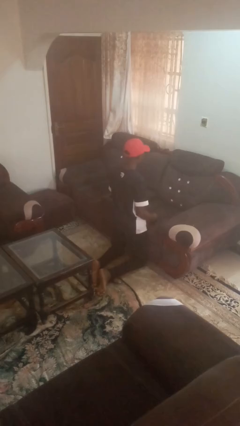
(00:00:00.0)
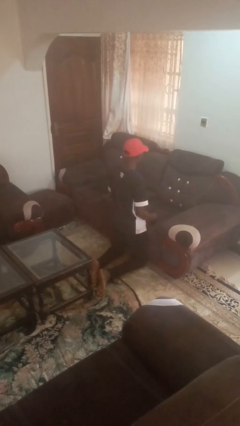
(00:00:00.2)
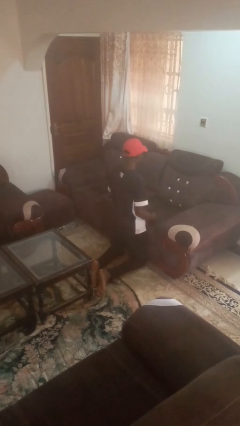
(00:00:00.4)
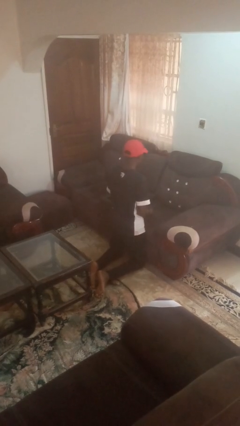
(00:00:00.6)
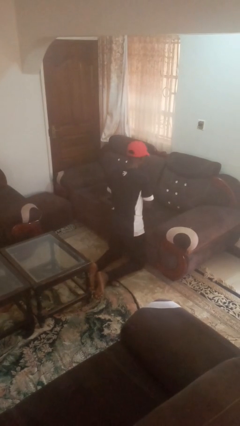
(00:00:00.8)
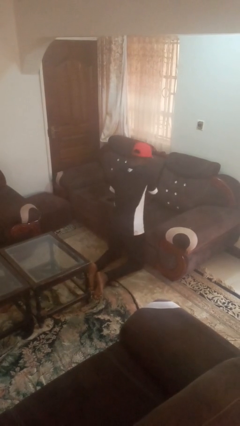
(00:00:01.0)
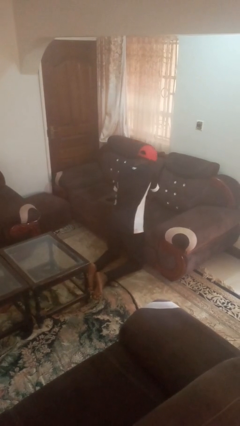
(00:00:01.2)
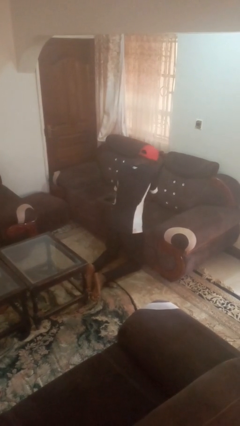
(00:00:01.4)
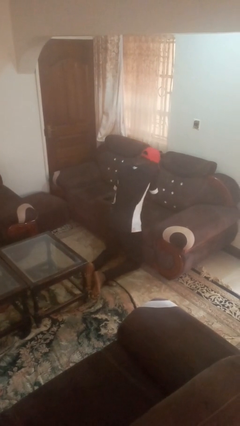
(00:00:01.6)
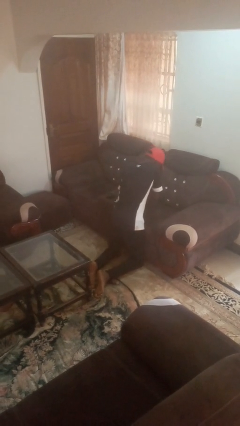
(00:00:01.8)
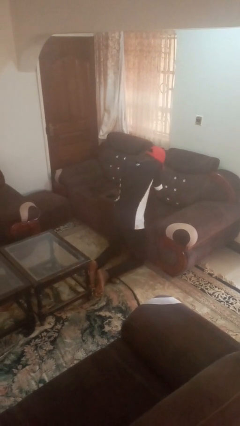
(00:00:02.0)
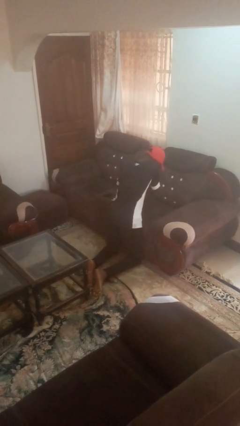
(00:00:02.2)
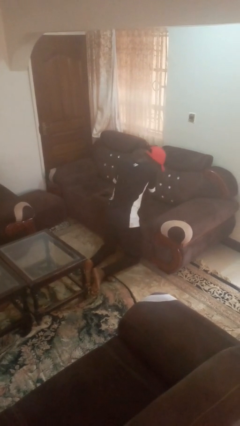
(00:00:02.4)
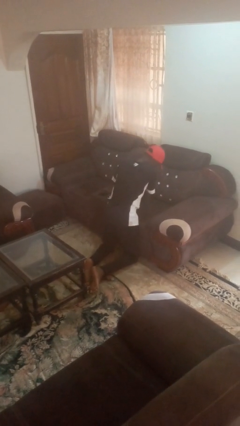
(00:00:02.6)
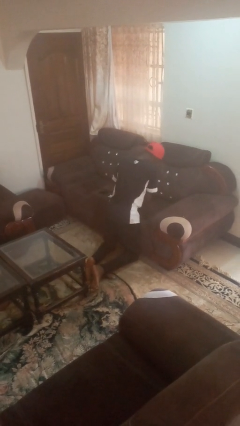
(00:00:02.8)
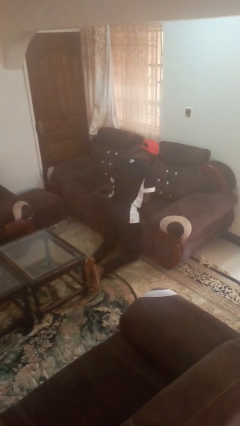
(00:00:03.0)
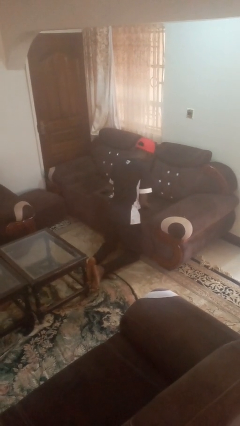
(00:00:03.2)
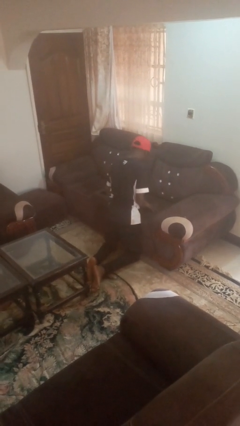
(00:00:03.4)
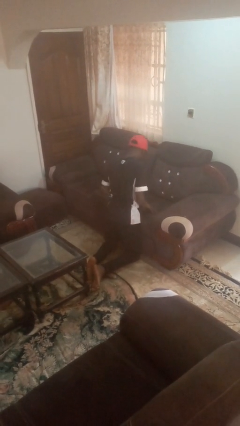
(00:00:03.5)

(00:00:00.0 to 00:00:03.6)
person searches in couch

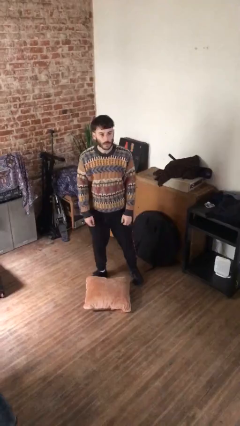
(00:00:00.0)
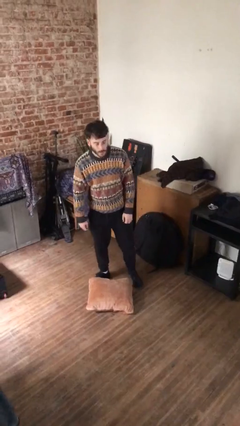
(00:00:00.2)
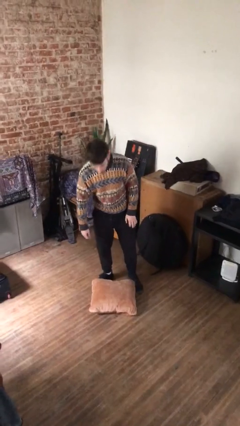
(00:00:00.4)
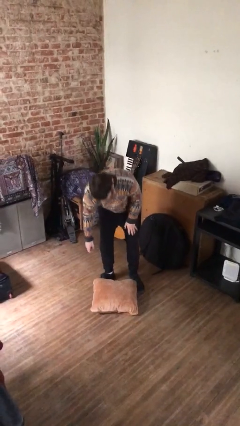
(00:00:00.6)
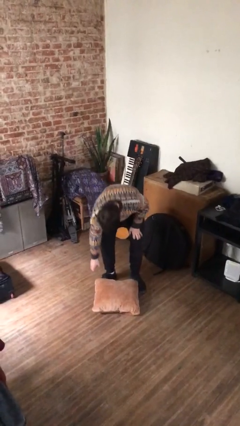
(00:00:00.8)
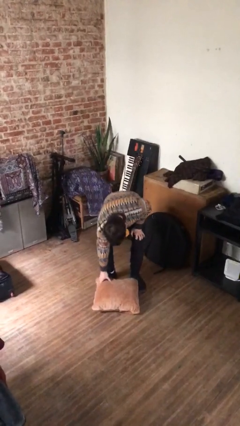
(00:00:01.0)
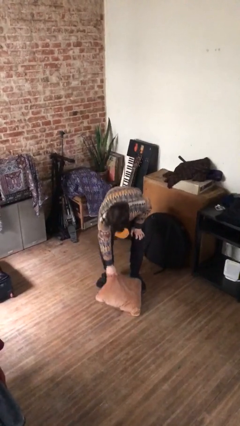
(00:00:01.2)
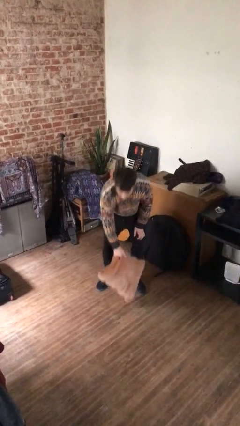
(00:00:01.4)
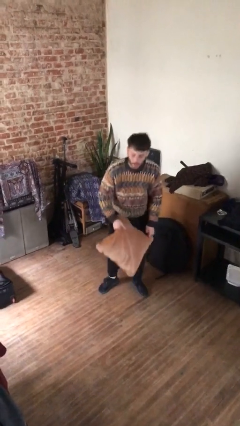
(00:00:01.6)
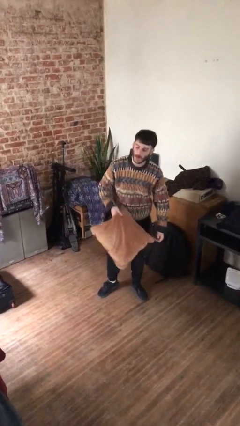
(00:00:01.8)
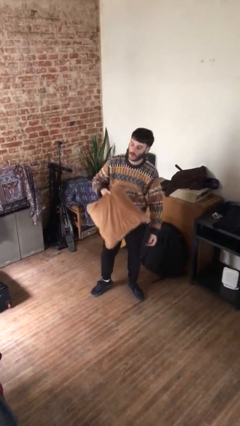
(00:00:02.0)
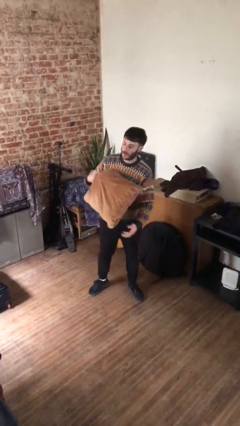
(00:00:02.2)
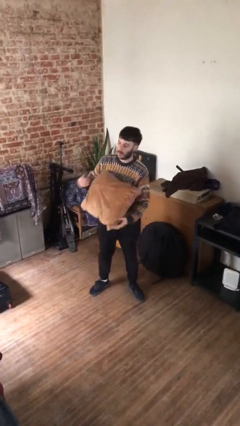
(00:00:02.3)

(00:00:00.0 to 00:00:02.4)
person picks up object from floor

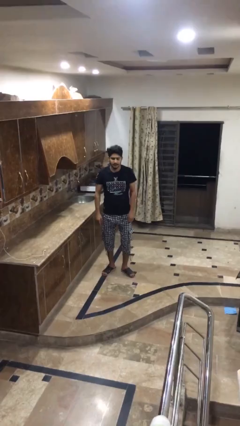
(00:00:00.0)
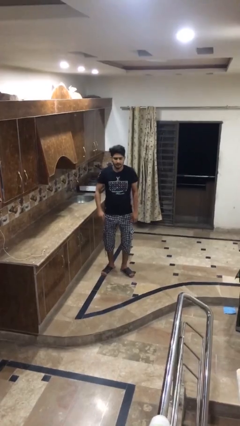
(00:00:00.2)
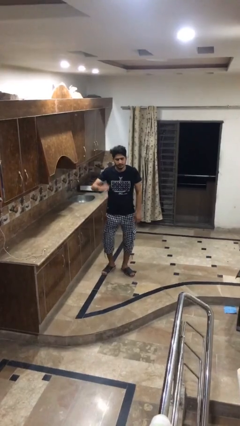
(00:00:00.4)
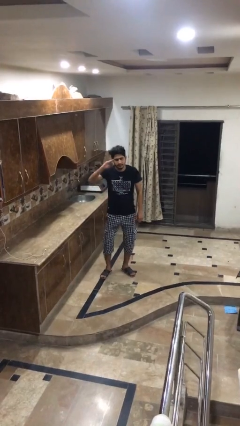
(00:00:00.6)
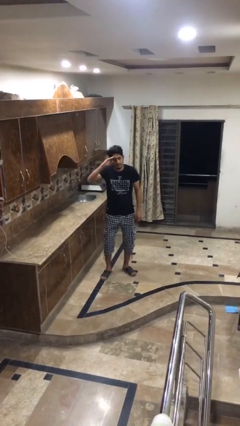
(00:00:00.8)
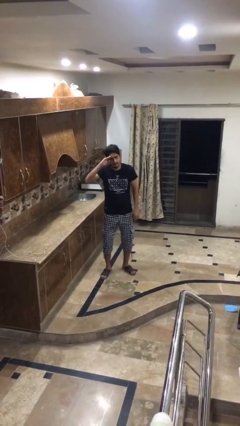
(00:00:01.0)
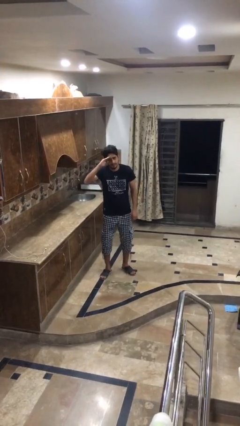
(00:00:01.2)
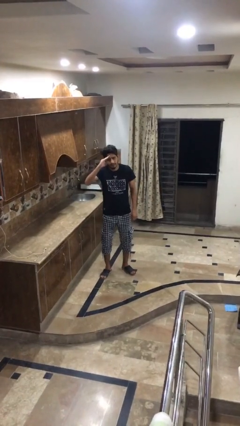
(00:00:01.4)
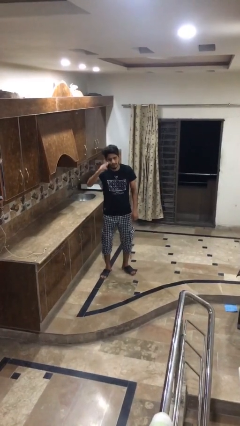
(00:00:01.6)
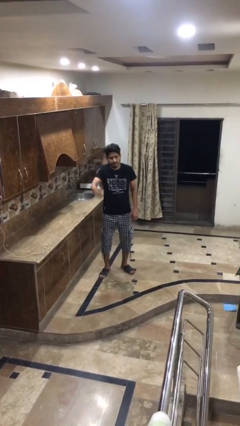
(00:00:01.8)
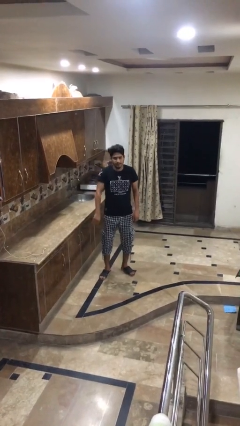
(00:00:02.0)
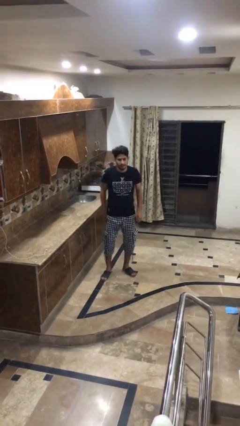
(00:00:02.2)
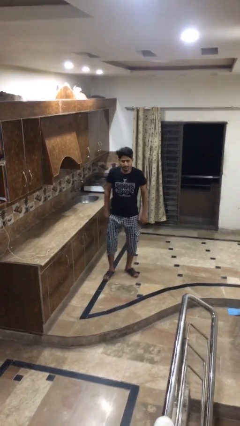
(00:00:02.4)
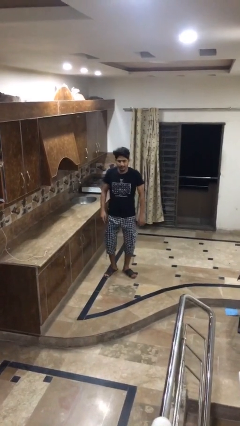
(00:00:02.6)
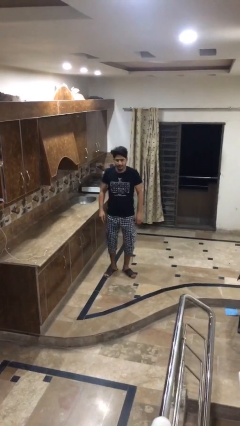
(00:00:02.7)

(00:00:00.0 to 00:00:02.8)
person salutes

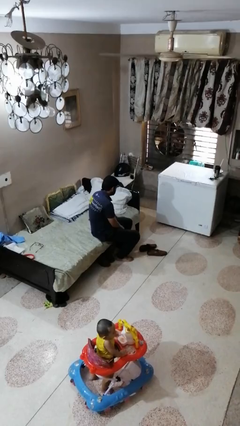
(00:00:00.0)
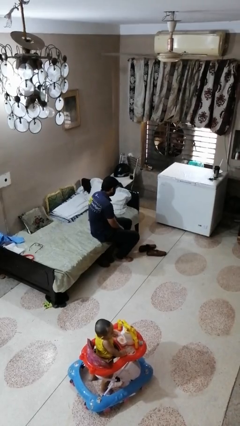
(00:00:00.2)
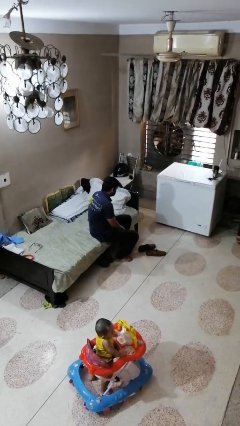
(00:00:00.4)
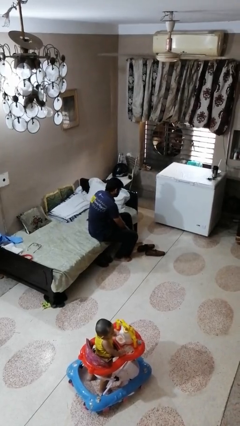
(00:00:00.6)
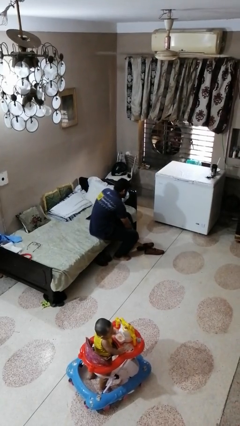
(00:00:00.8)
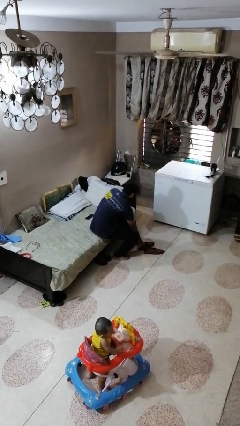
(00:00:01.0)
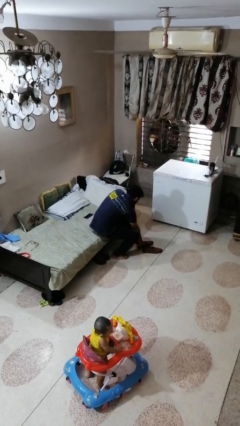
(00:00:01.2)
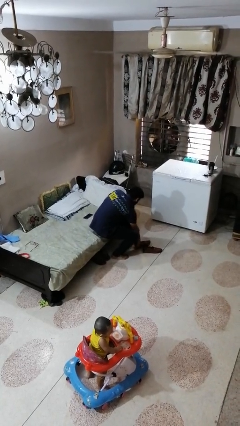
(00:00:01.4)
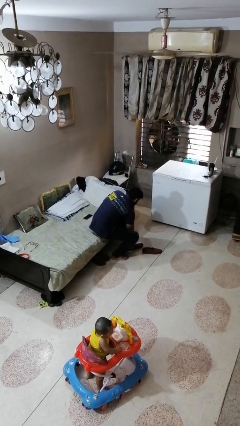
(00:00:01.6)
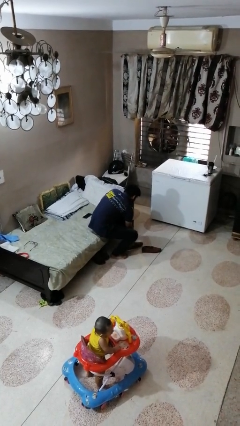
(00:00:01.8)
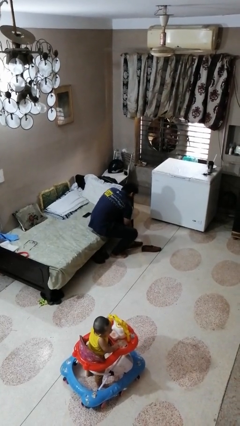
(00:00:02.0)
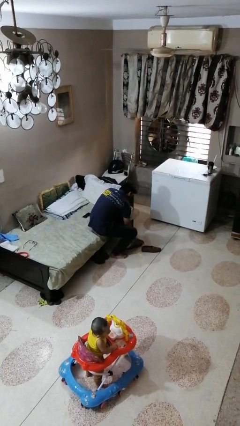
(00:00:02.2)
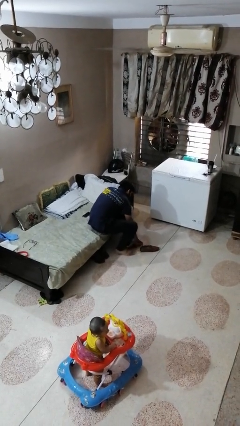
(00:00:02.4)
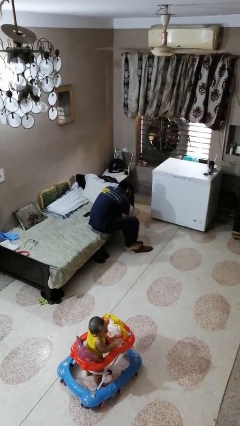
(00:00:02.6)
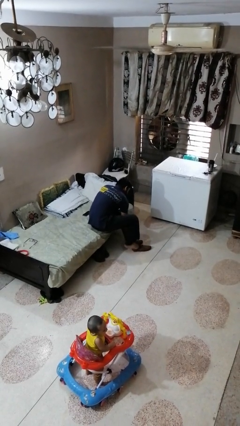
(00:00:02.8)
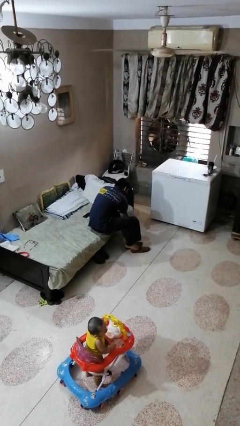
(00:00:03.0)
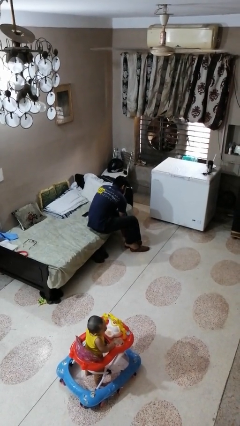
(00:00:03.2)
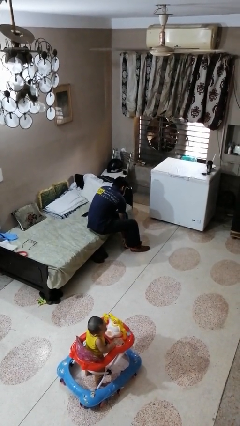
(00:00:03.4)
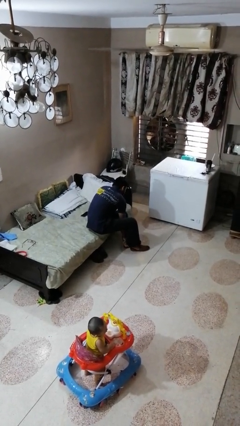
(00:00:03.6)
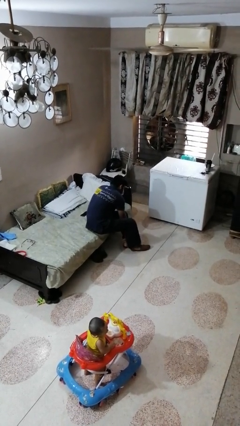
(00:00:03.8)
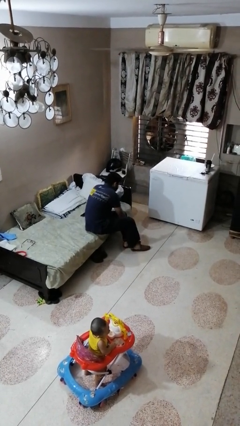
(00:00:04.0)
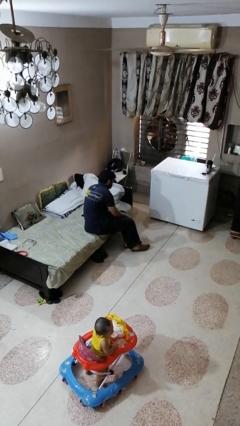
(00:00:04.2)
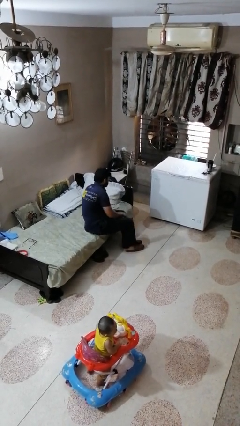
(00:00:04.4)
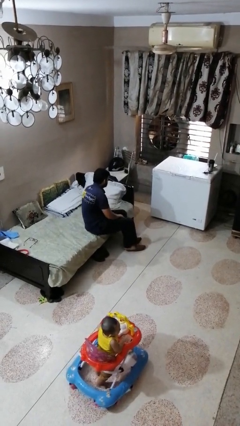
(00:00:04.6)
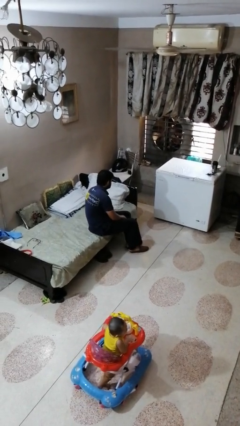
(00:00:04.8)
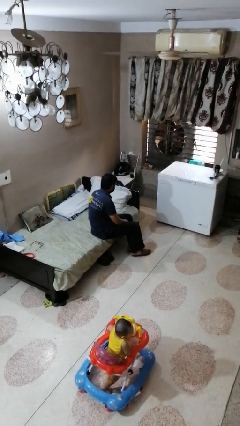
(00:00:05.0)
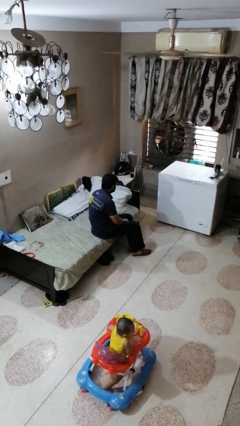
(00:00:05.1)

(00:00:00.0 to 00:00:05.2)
person puts on shoes

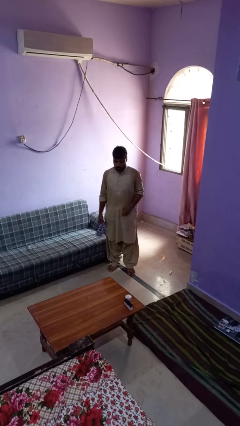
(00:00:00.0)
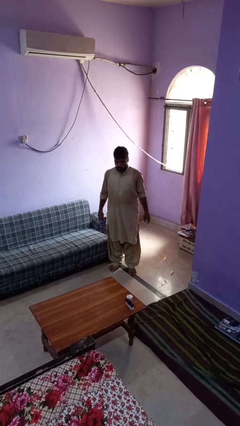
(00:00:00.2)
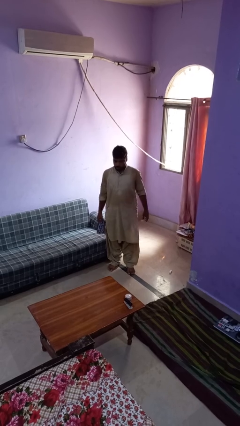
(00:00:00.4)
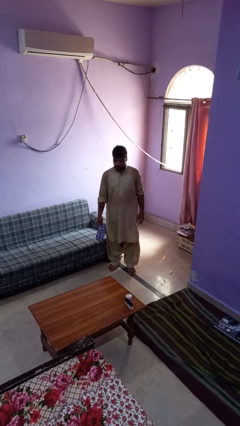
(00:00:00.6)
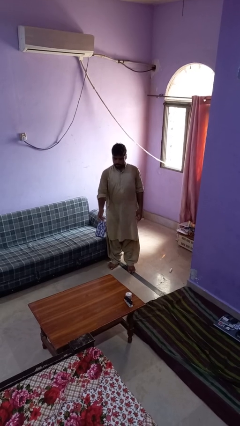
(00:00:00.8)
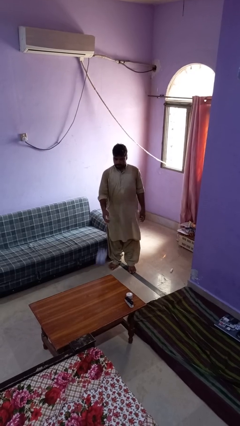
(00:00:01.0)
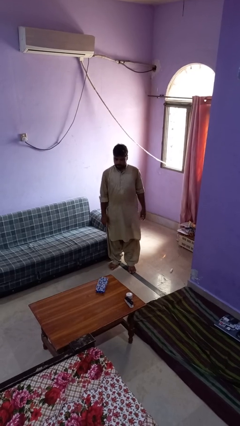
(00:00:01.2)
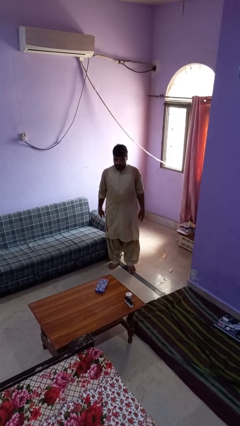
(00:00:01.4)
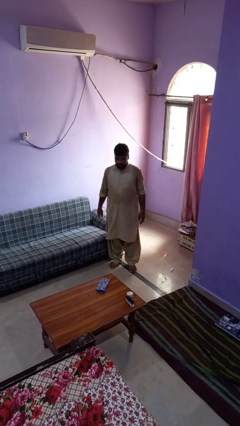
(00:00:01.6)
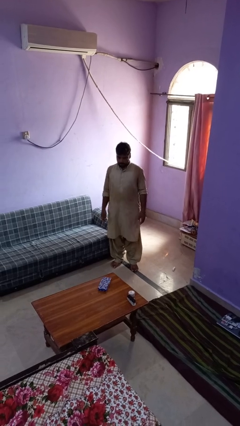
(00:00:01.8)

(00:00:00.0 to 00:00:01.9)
person throws object on table

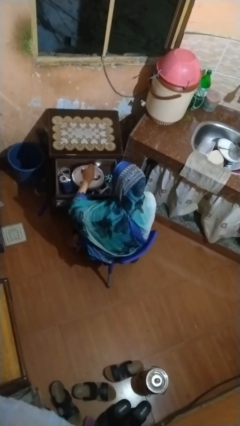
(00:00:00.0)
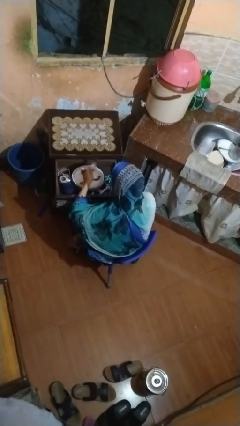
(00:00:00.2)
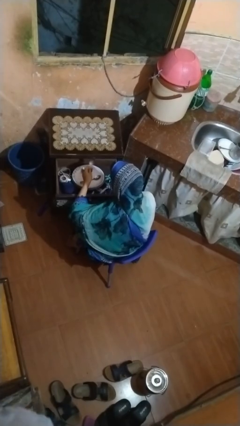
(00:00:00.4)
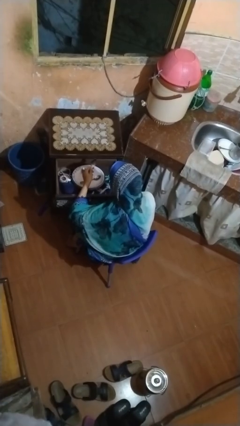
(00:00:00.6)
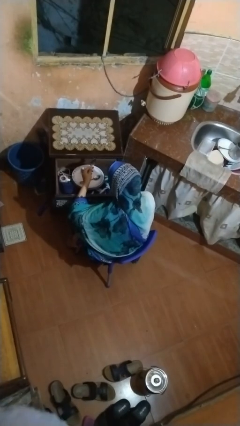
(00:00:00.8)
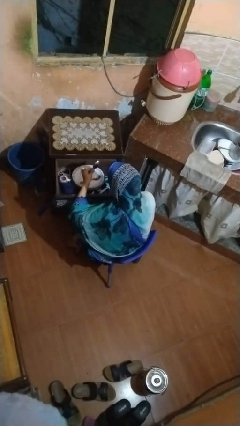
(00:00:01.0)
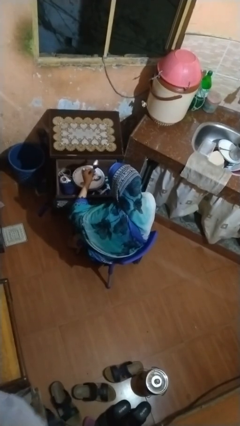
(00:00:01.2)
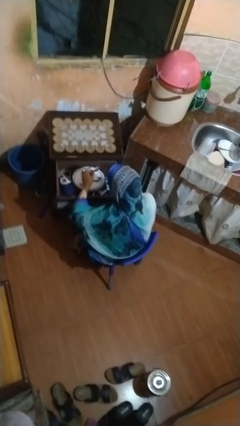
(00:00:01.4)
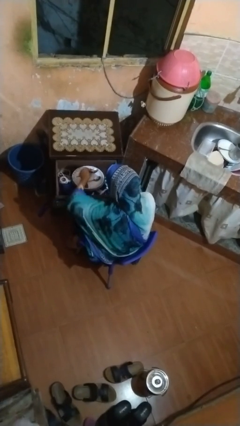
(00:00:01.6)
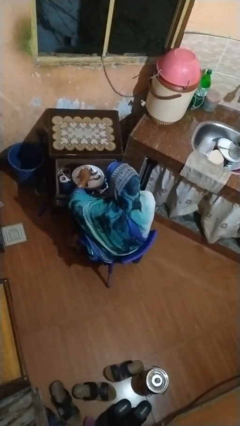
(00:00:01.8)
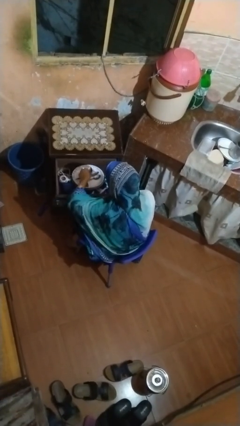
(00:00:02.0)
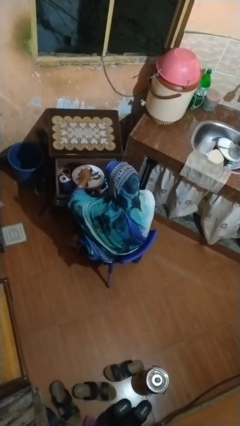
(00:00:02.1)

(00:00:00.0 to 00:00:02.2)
person takes object from kitchen drawer
